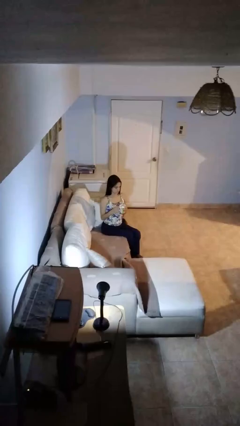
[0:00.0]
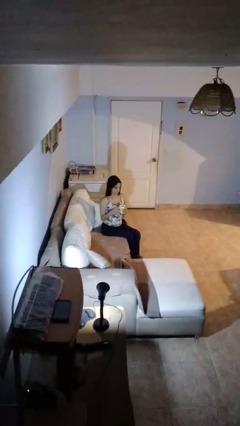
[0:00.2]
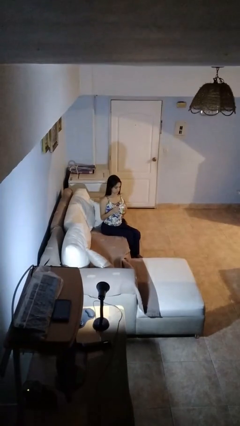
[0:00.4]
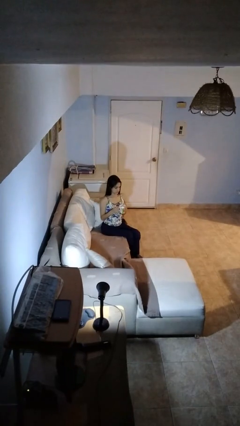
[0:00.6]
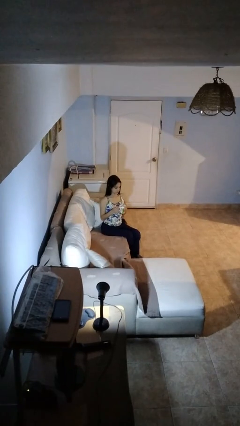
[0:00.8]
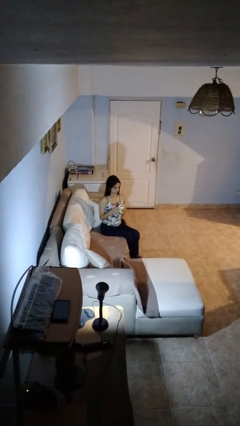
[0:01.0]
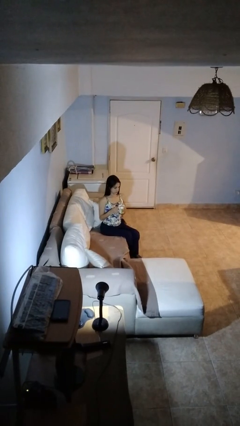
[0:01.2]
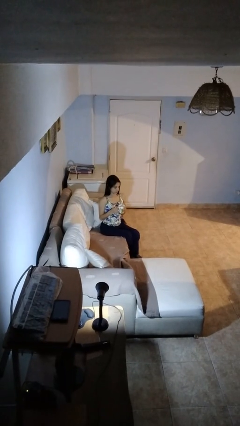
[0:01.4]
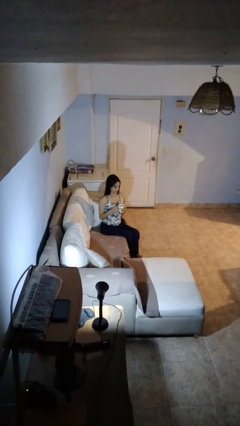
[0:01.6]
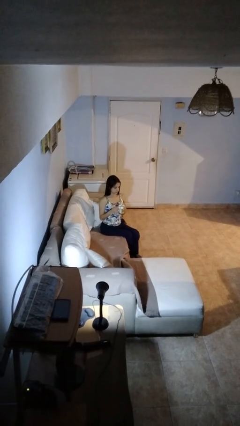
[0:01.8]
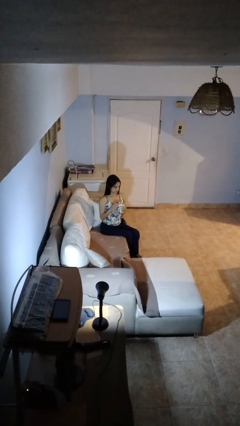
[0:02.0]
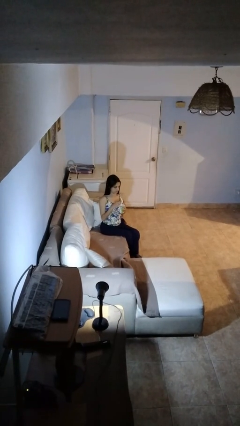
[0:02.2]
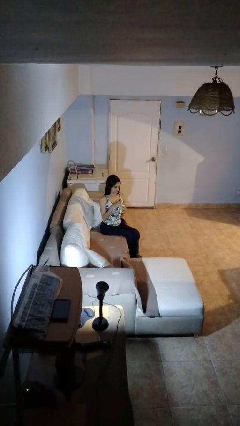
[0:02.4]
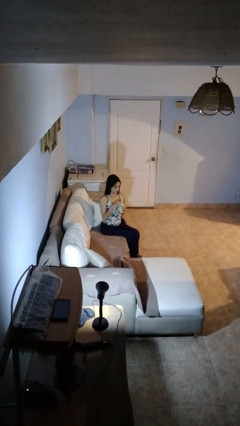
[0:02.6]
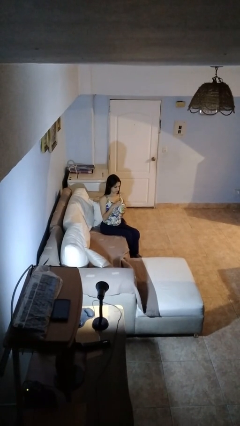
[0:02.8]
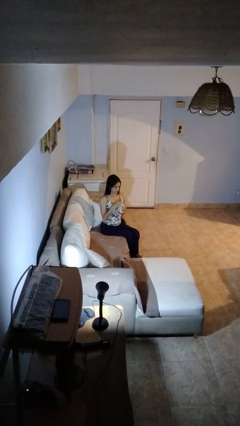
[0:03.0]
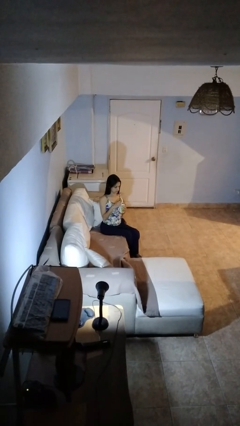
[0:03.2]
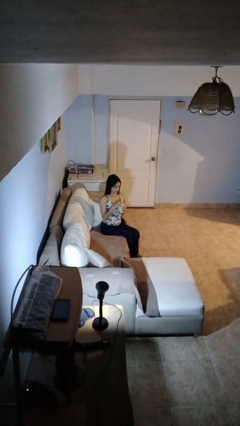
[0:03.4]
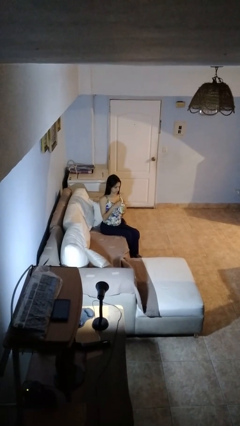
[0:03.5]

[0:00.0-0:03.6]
person stirs mug

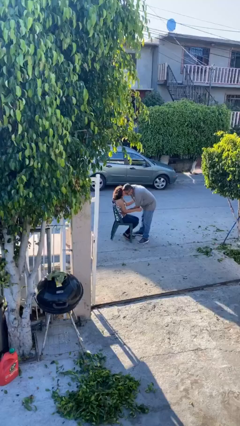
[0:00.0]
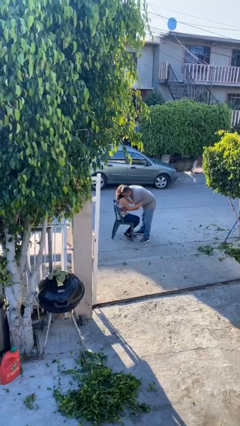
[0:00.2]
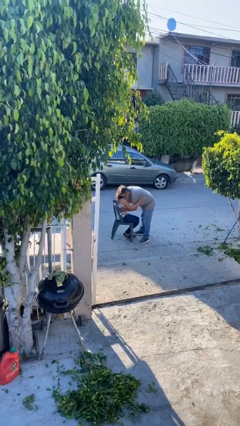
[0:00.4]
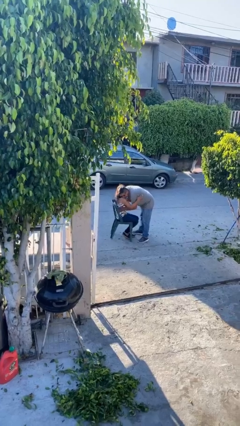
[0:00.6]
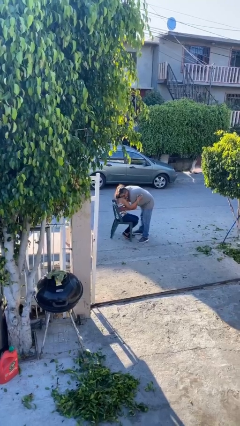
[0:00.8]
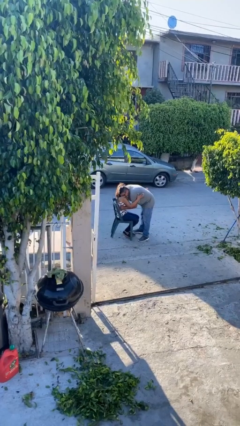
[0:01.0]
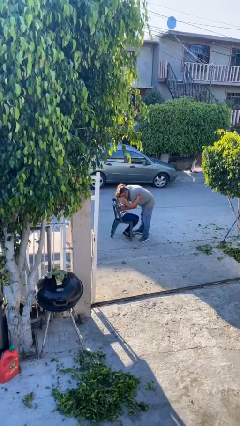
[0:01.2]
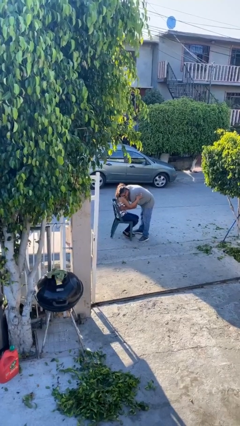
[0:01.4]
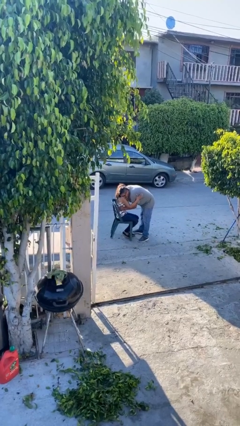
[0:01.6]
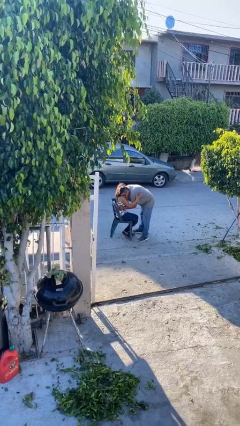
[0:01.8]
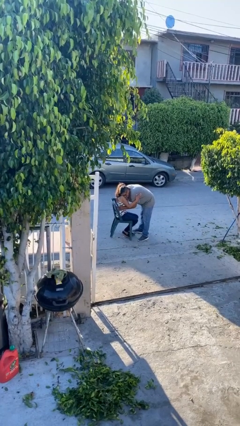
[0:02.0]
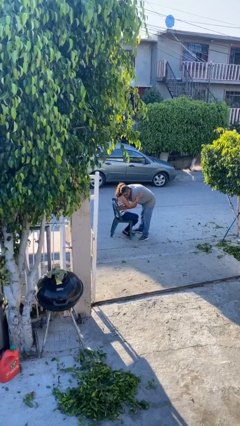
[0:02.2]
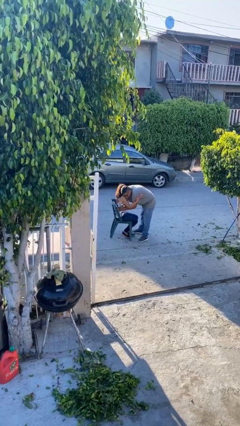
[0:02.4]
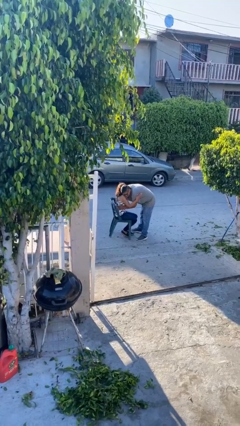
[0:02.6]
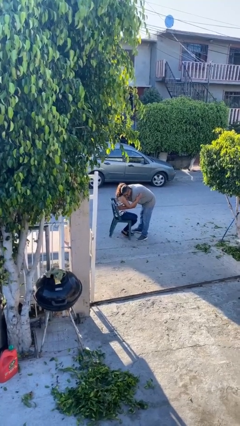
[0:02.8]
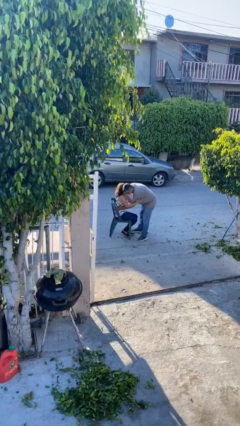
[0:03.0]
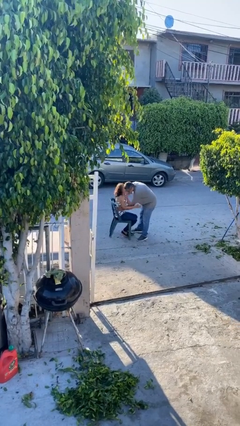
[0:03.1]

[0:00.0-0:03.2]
person embraces person

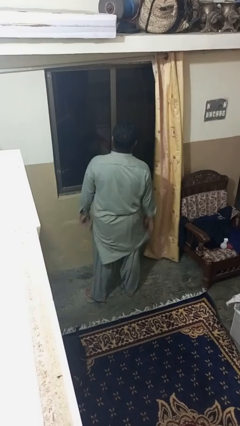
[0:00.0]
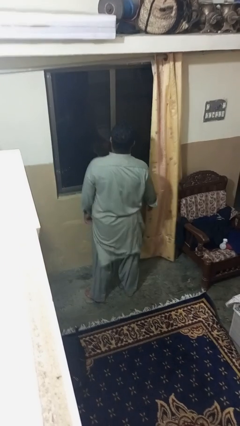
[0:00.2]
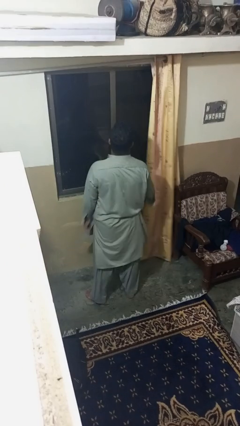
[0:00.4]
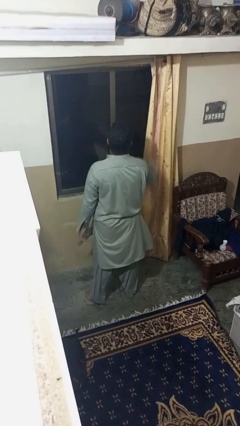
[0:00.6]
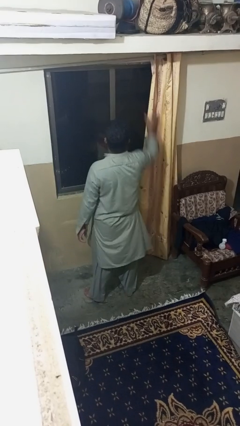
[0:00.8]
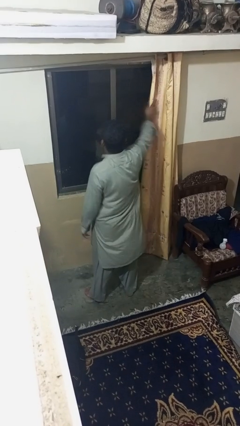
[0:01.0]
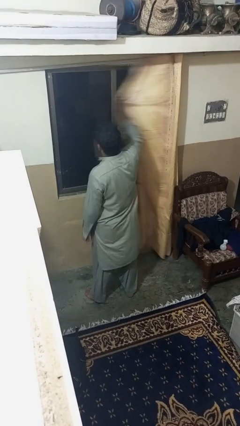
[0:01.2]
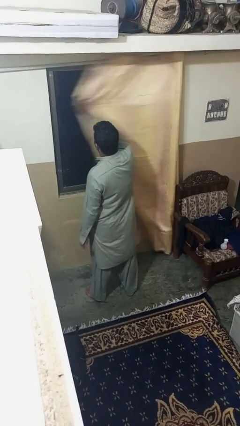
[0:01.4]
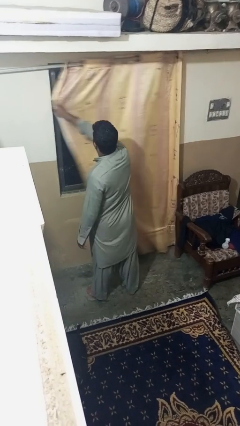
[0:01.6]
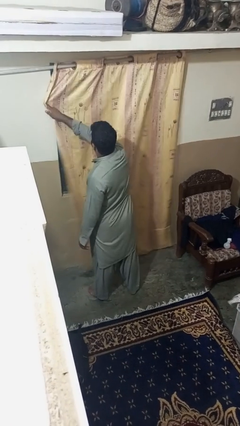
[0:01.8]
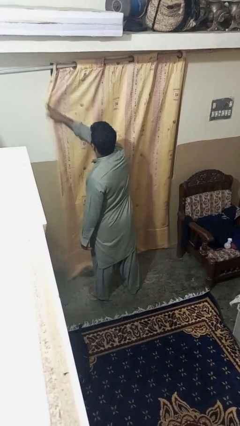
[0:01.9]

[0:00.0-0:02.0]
person closes curtains

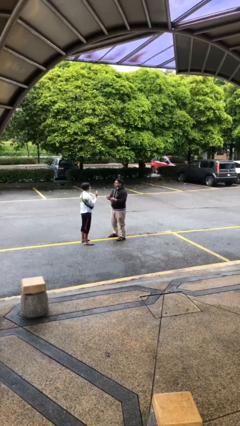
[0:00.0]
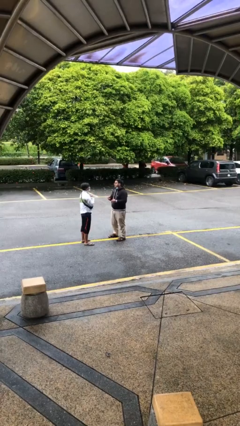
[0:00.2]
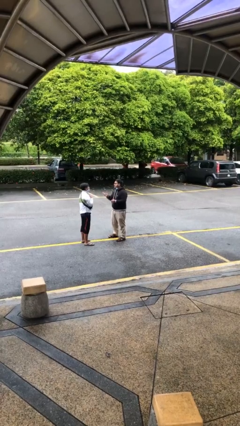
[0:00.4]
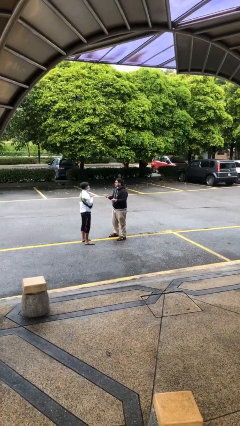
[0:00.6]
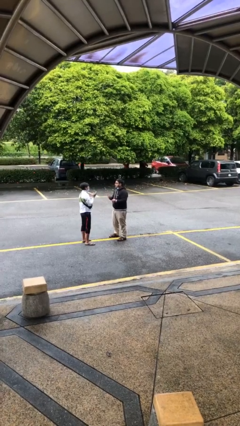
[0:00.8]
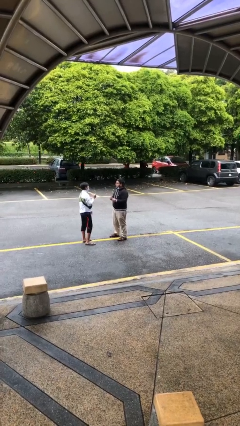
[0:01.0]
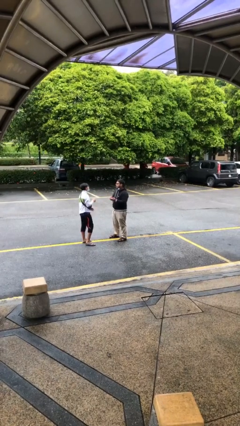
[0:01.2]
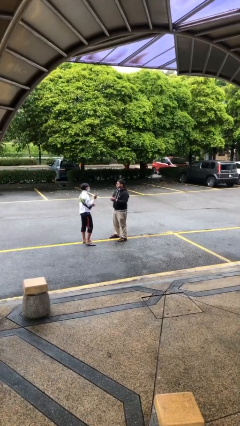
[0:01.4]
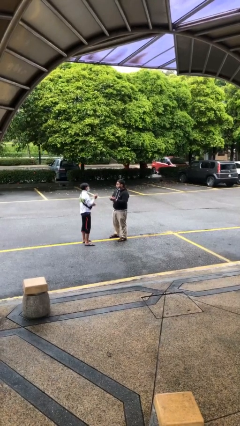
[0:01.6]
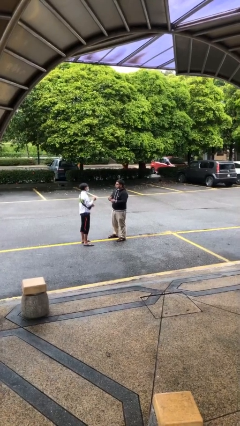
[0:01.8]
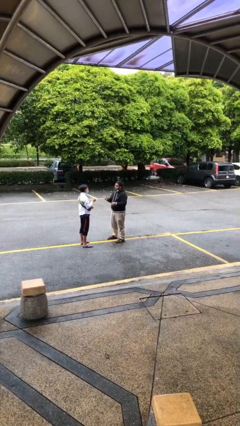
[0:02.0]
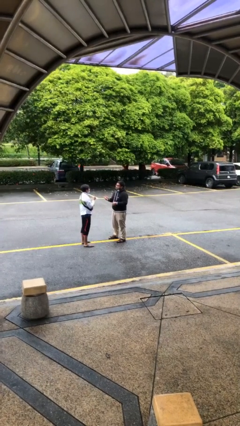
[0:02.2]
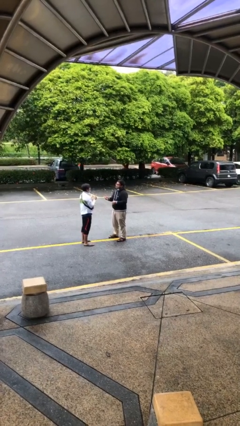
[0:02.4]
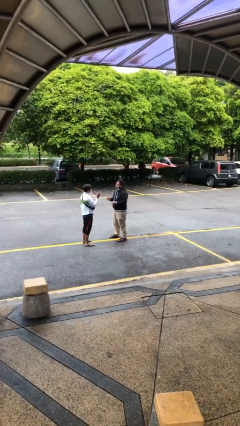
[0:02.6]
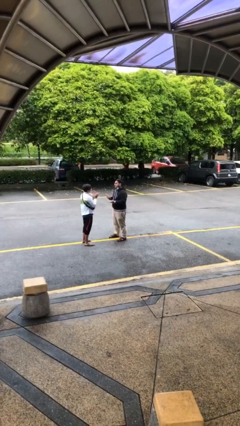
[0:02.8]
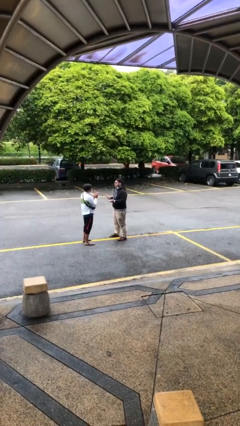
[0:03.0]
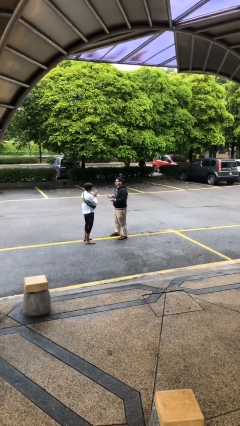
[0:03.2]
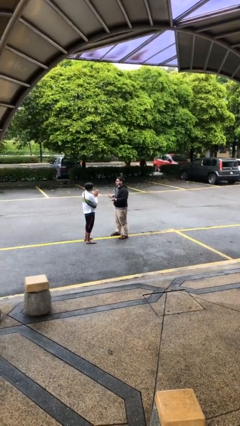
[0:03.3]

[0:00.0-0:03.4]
person talks to person

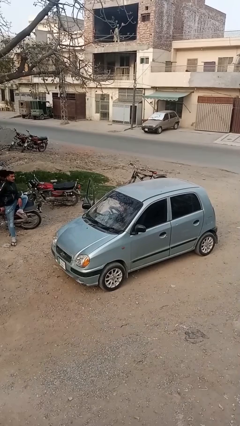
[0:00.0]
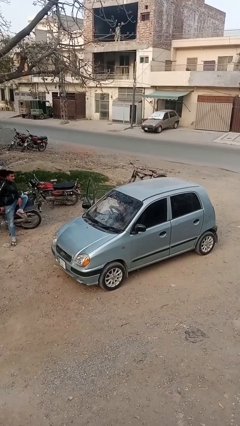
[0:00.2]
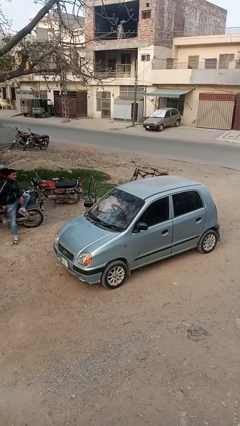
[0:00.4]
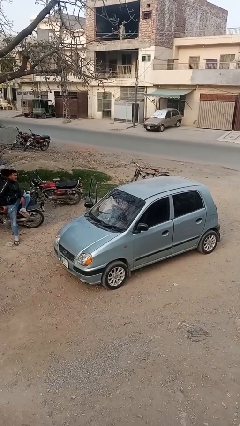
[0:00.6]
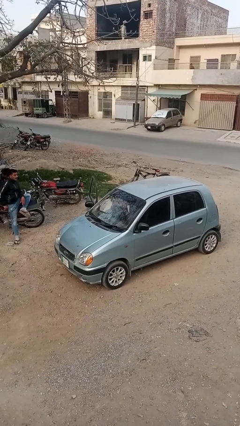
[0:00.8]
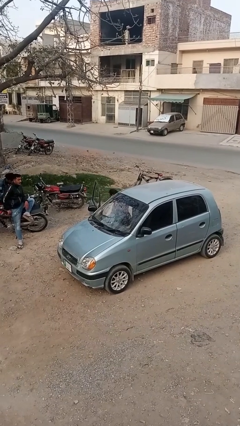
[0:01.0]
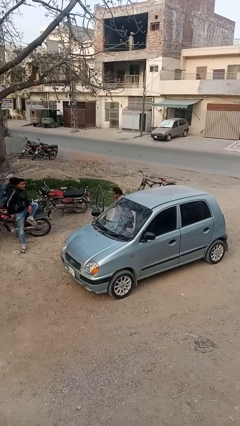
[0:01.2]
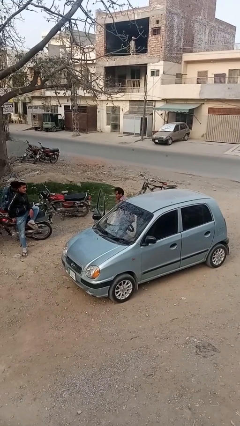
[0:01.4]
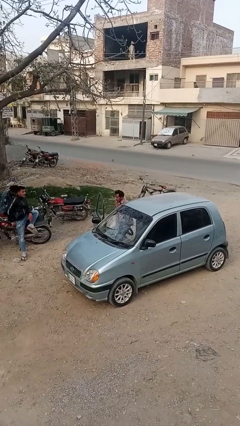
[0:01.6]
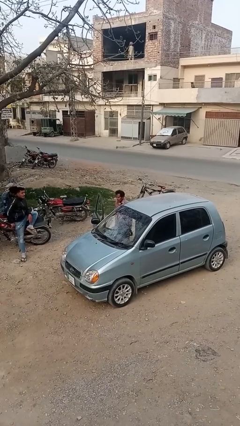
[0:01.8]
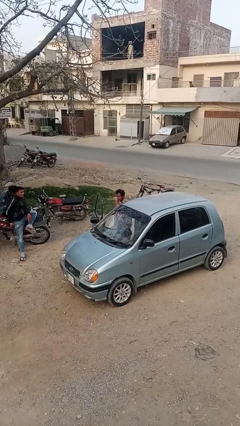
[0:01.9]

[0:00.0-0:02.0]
person exits car

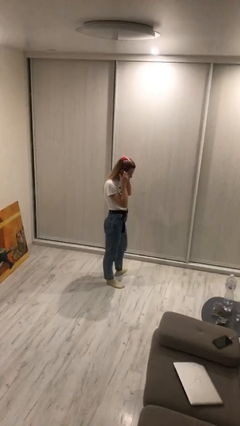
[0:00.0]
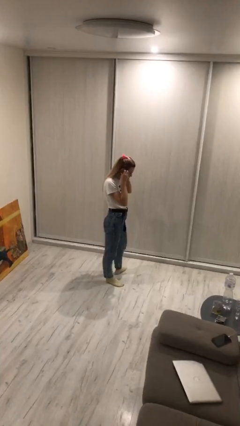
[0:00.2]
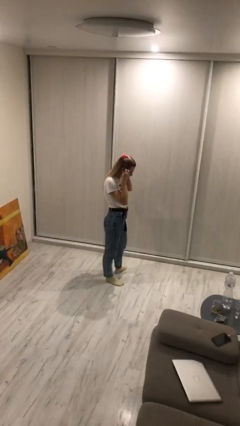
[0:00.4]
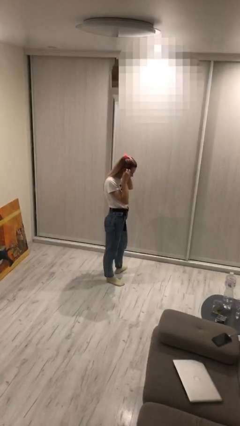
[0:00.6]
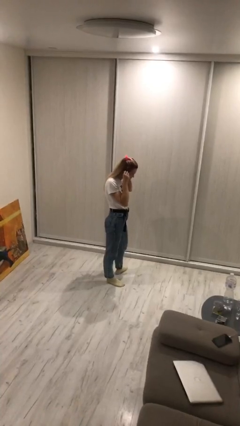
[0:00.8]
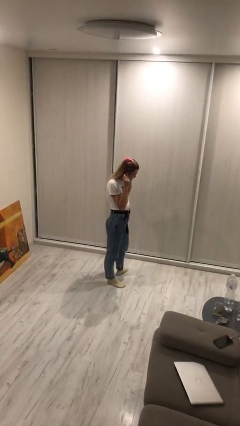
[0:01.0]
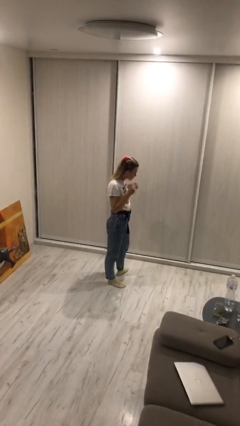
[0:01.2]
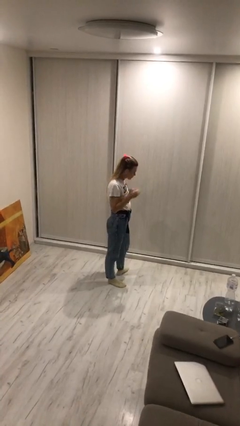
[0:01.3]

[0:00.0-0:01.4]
person takes off earrings

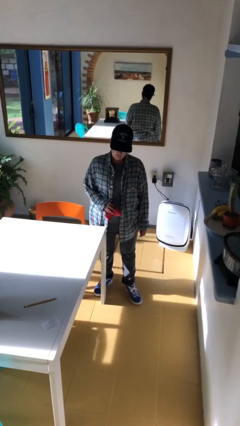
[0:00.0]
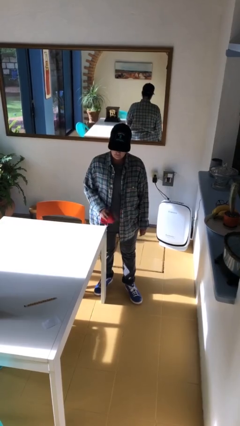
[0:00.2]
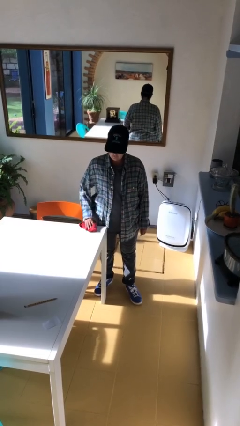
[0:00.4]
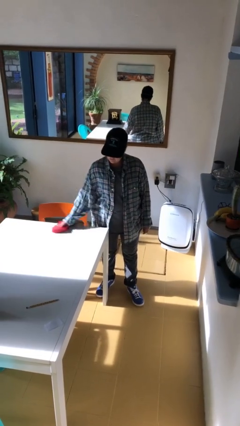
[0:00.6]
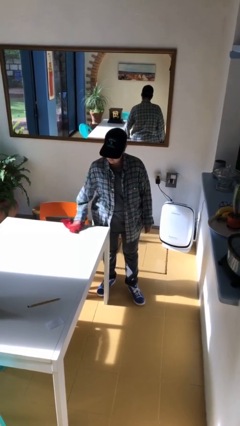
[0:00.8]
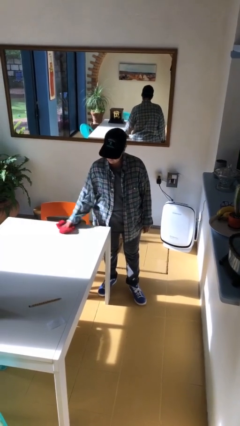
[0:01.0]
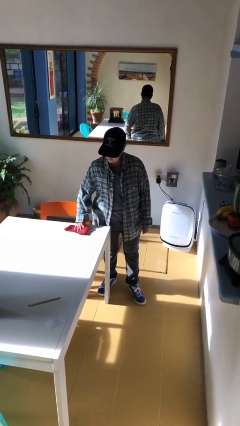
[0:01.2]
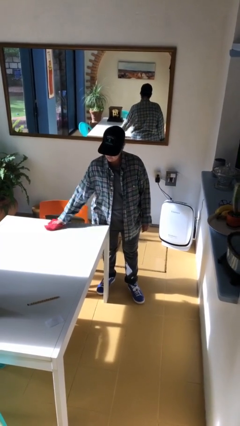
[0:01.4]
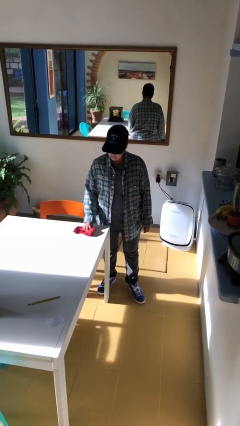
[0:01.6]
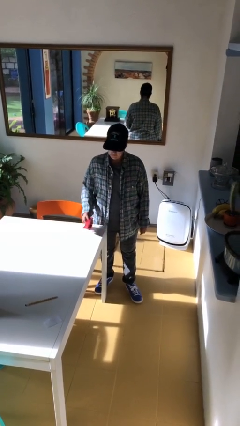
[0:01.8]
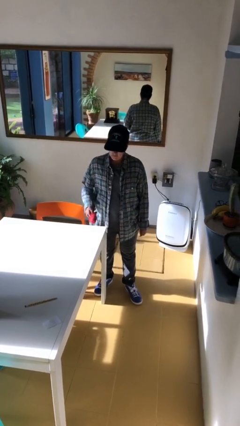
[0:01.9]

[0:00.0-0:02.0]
person cleans table with rag
